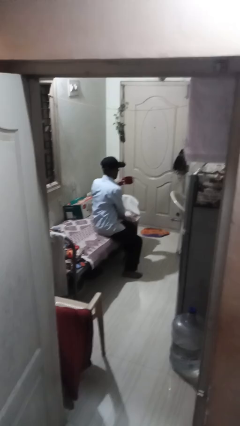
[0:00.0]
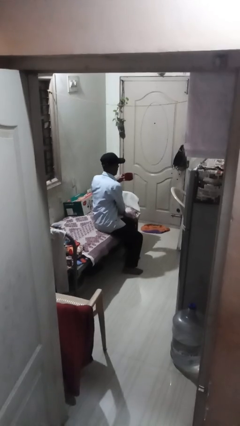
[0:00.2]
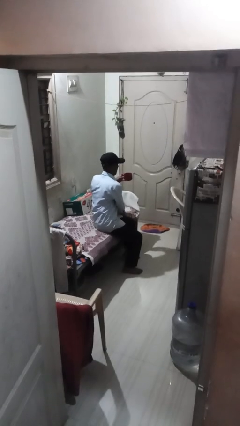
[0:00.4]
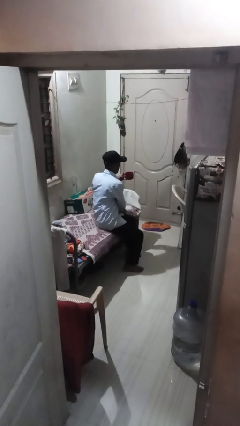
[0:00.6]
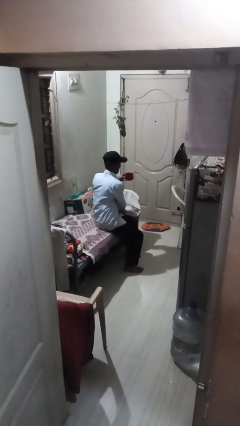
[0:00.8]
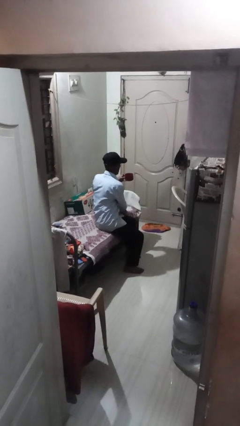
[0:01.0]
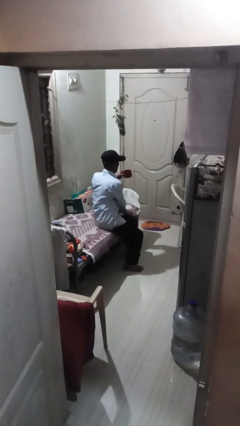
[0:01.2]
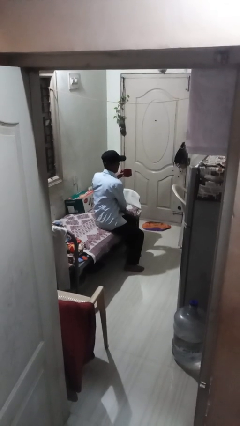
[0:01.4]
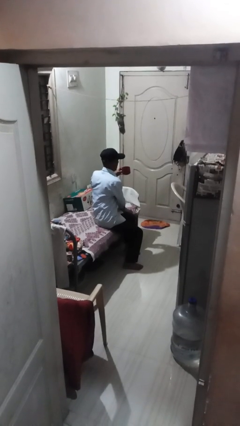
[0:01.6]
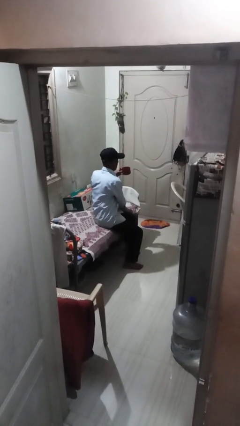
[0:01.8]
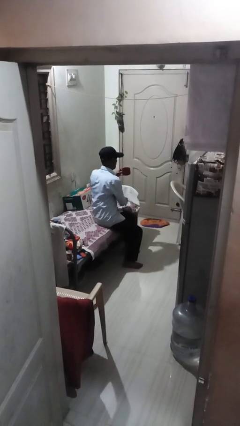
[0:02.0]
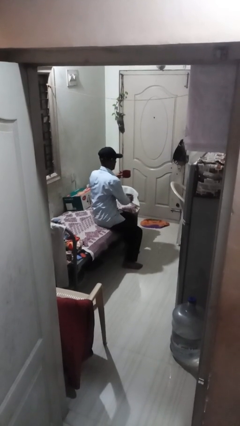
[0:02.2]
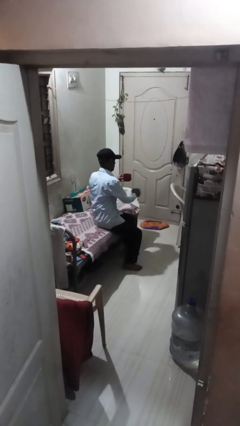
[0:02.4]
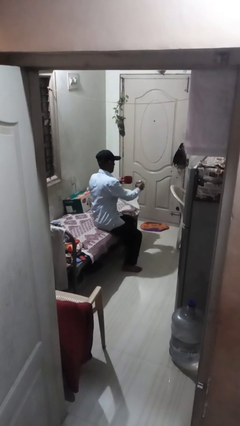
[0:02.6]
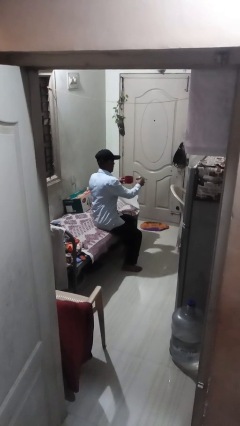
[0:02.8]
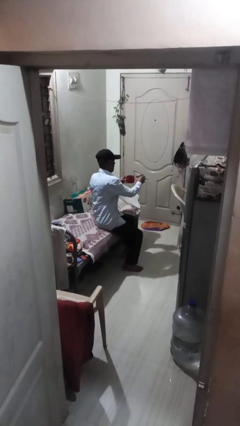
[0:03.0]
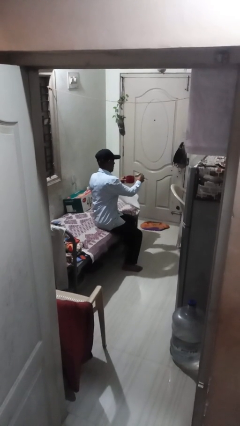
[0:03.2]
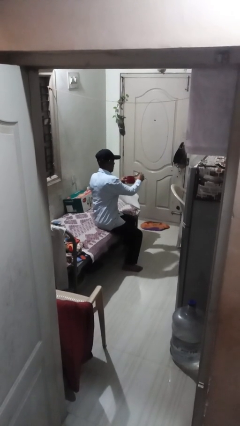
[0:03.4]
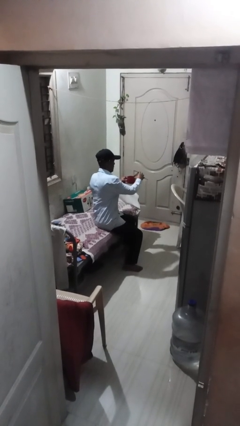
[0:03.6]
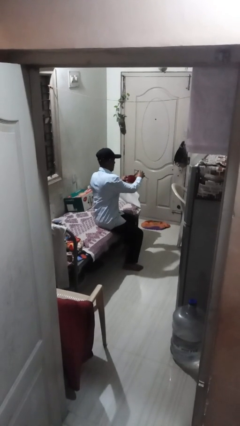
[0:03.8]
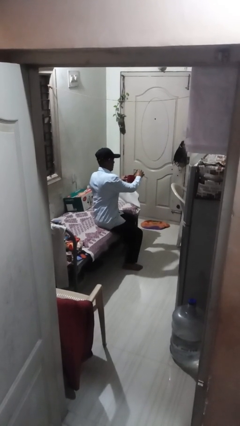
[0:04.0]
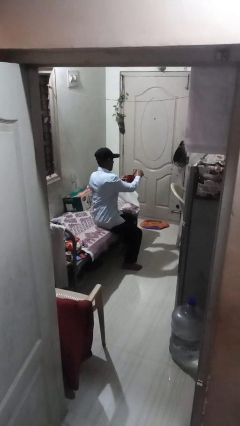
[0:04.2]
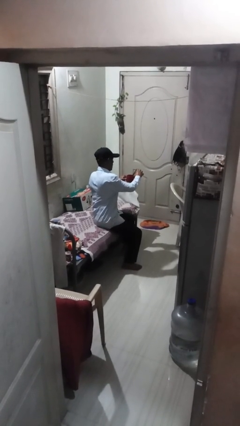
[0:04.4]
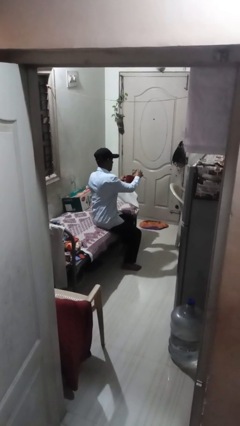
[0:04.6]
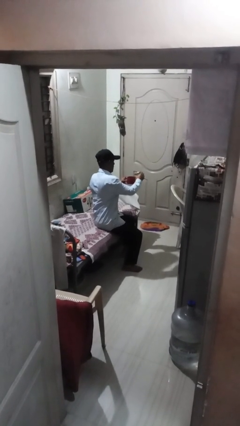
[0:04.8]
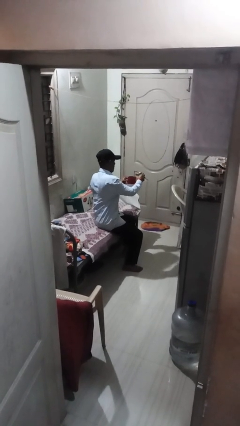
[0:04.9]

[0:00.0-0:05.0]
person pours coffee into mug

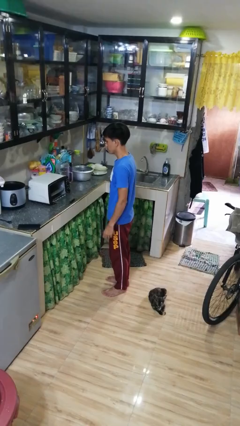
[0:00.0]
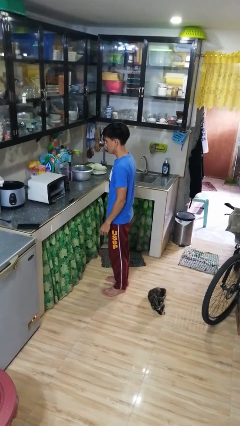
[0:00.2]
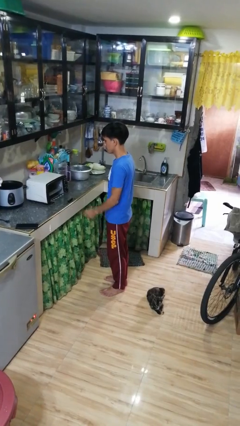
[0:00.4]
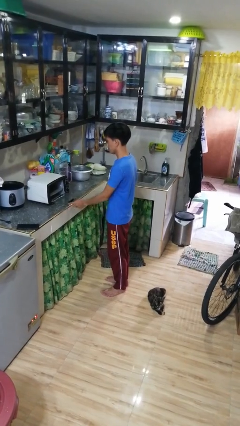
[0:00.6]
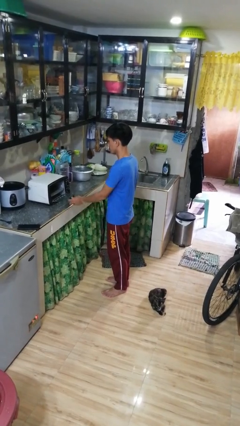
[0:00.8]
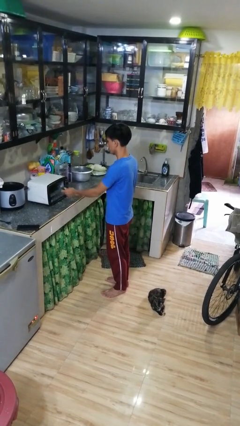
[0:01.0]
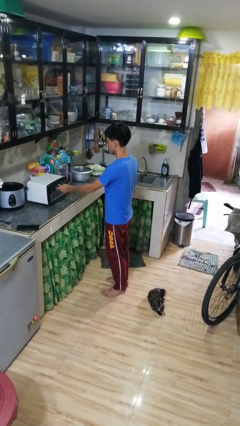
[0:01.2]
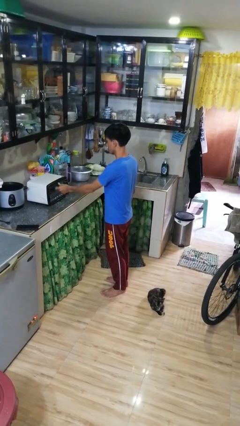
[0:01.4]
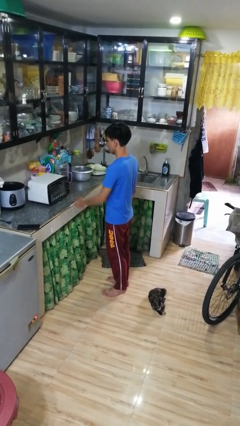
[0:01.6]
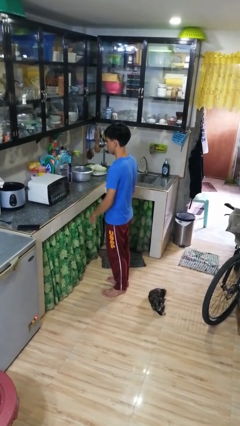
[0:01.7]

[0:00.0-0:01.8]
person closes microwave

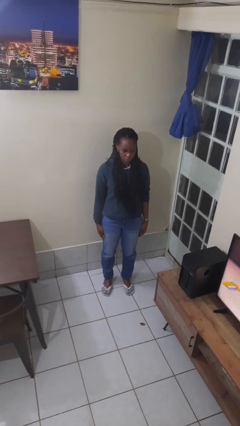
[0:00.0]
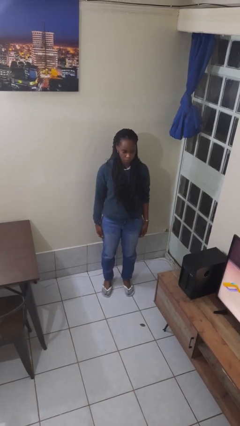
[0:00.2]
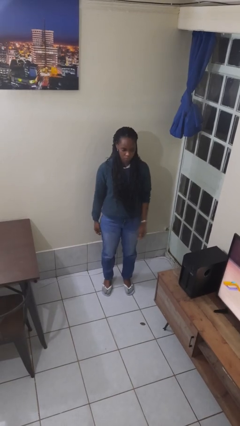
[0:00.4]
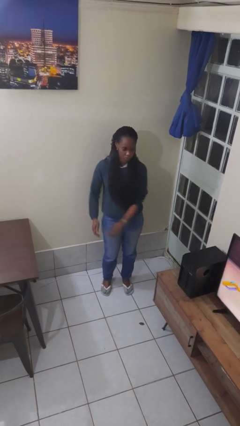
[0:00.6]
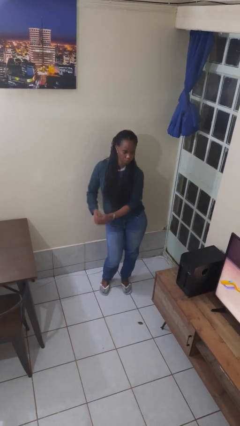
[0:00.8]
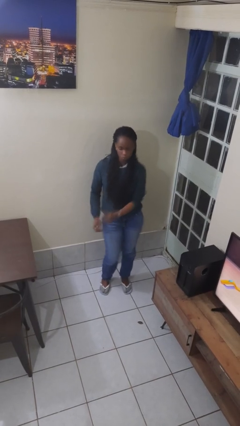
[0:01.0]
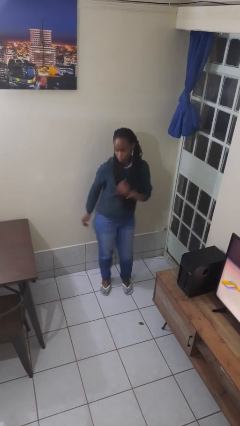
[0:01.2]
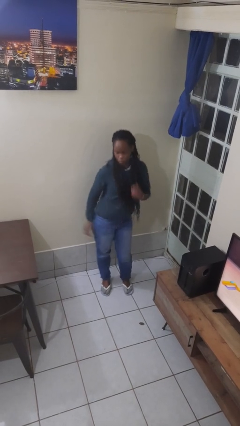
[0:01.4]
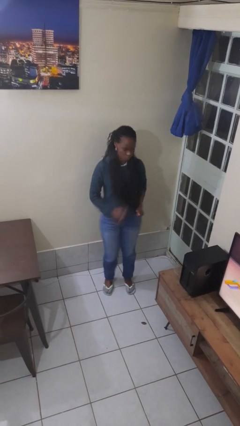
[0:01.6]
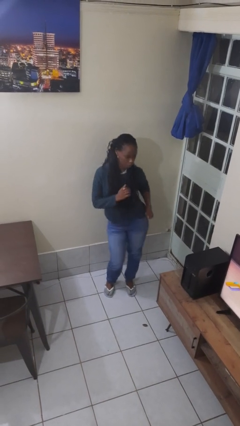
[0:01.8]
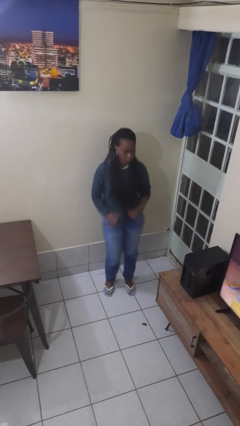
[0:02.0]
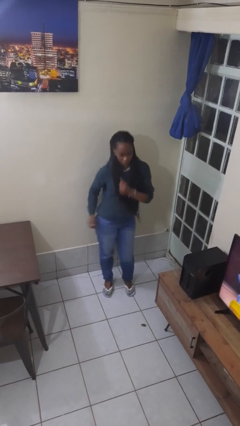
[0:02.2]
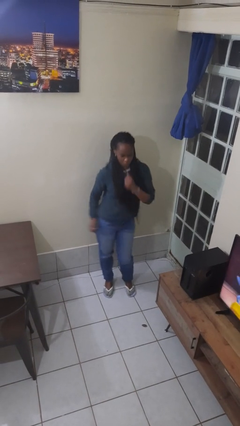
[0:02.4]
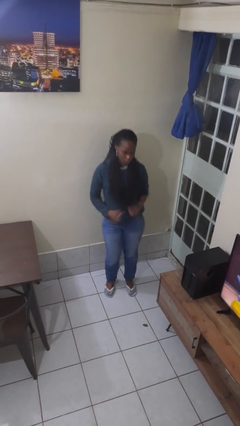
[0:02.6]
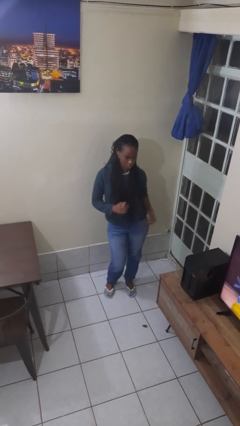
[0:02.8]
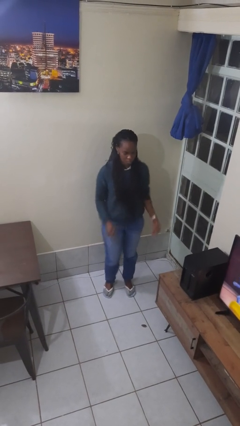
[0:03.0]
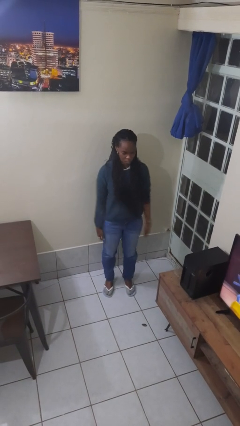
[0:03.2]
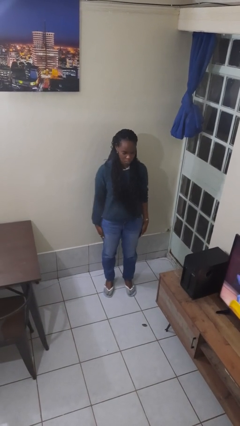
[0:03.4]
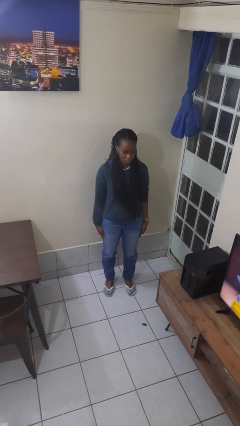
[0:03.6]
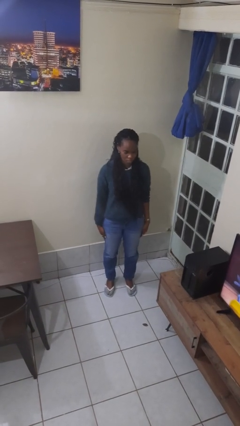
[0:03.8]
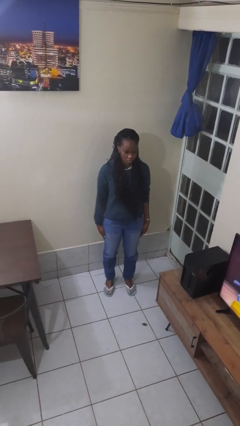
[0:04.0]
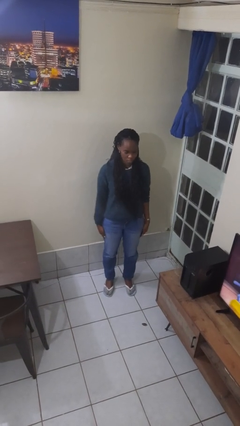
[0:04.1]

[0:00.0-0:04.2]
person wiggles hips

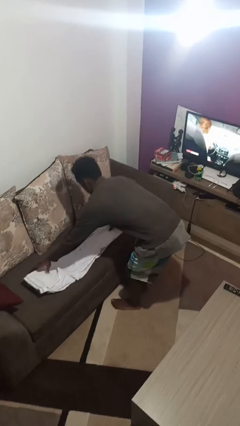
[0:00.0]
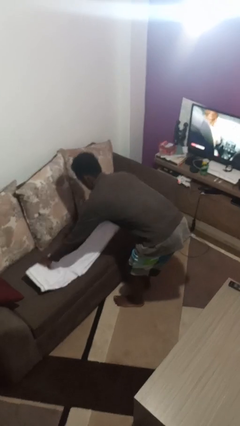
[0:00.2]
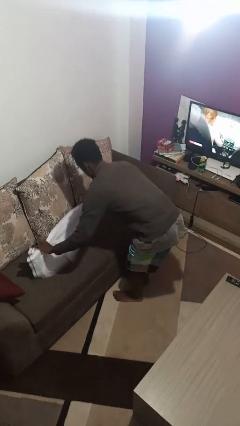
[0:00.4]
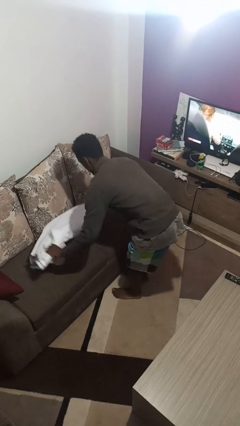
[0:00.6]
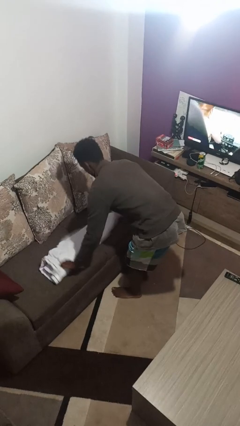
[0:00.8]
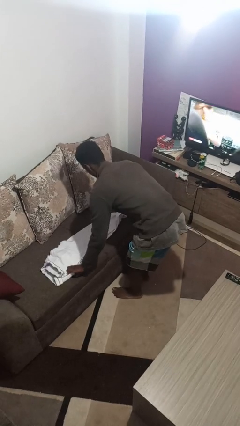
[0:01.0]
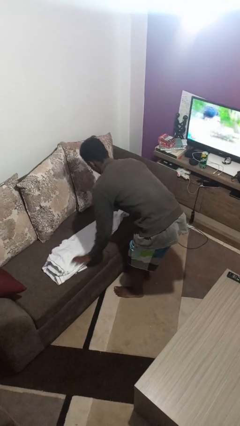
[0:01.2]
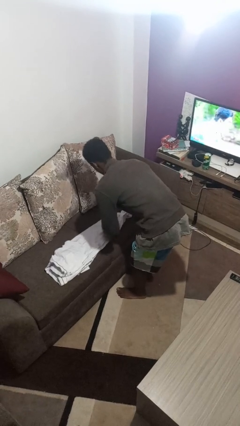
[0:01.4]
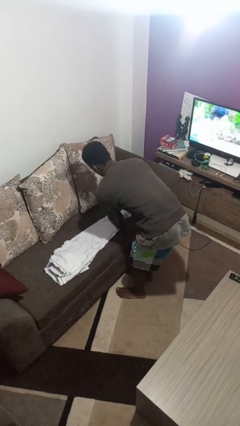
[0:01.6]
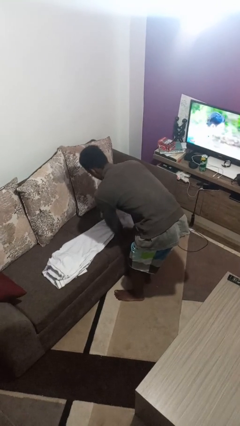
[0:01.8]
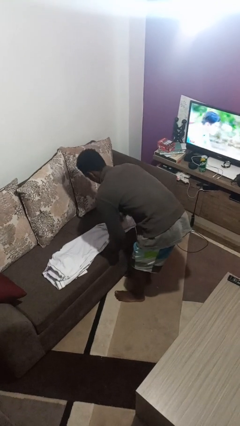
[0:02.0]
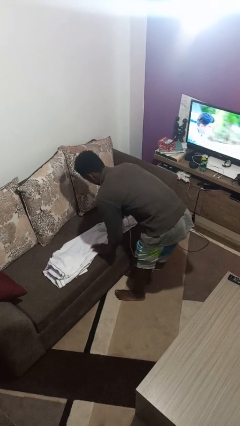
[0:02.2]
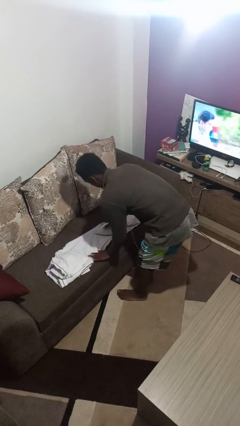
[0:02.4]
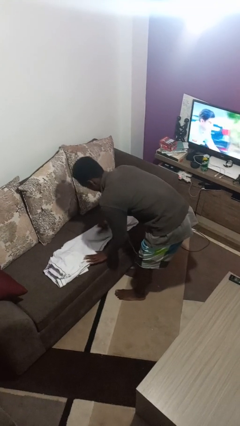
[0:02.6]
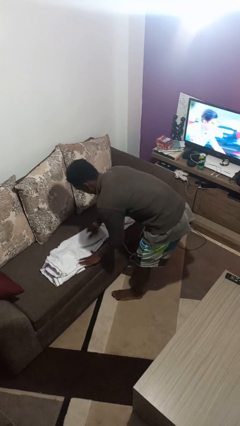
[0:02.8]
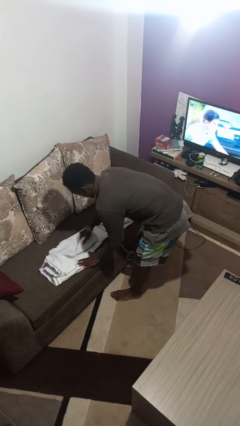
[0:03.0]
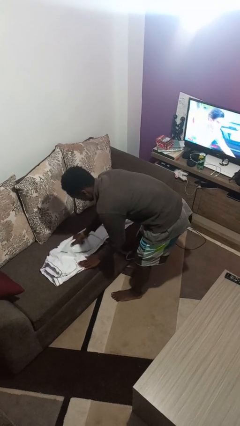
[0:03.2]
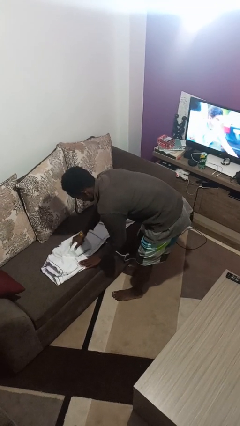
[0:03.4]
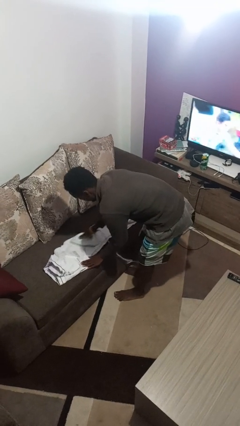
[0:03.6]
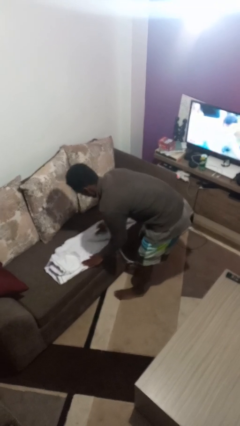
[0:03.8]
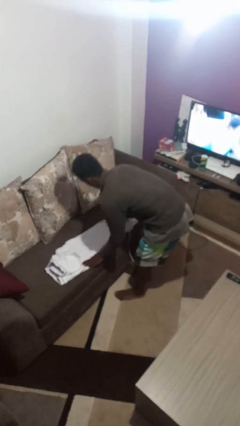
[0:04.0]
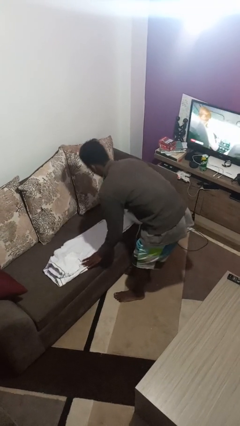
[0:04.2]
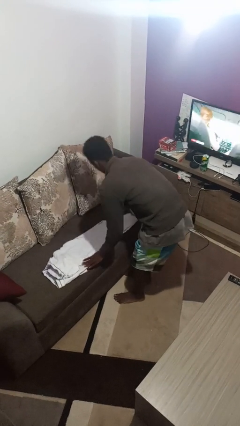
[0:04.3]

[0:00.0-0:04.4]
person irons clothes

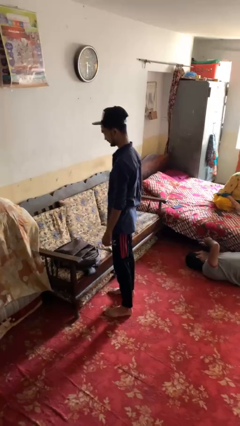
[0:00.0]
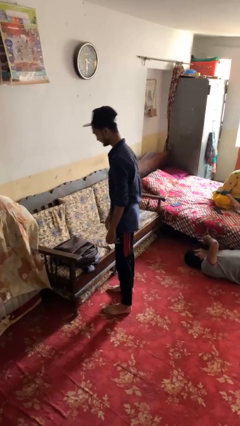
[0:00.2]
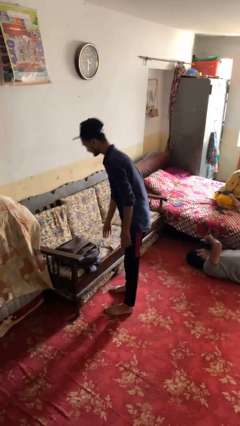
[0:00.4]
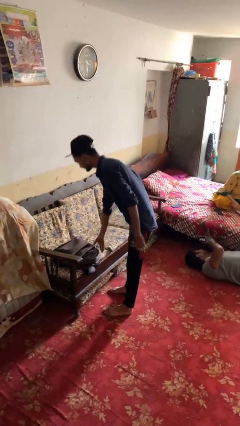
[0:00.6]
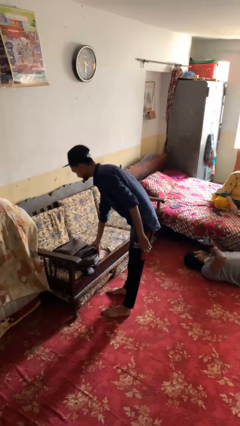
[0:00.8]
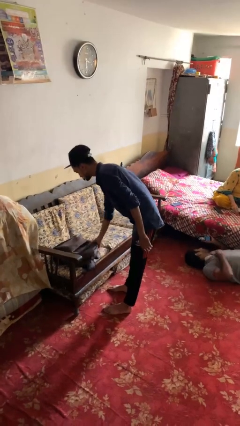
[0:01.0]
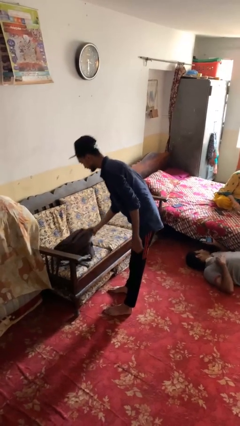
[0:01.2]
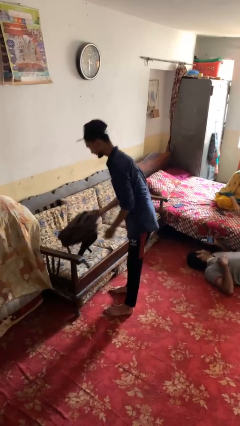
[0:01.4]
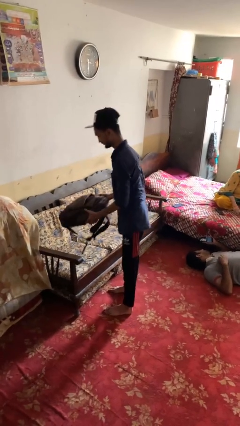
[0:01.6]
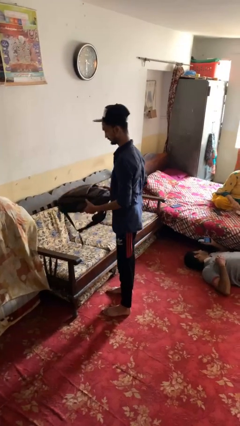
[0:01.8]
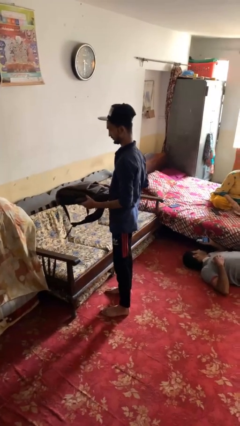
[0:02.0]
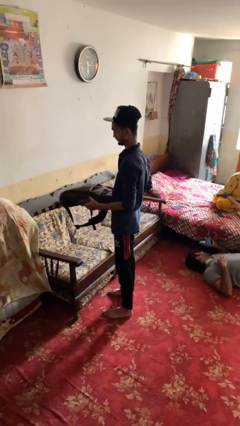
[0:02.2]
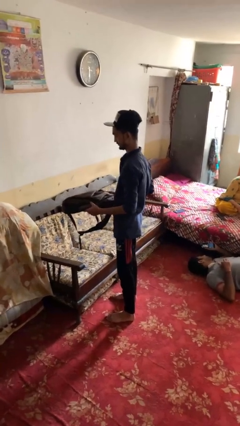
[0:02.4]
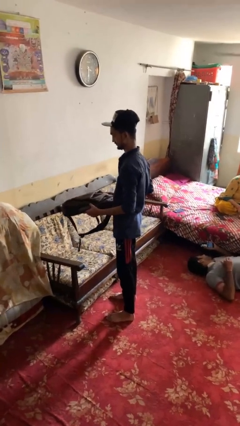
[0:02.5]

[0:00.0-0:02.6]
person picks up object from couch

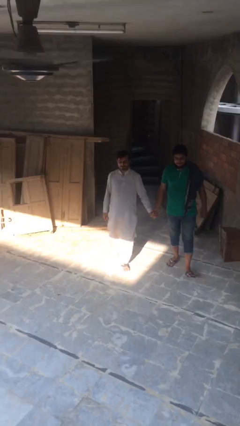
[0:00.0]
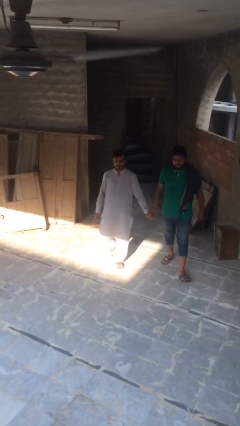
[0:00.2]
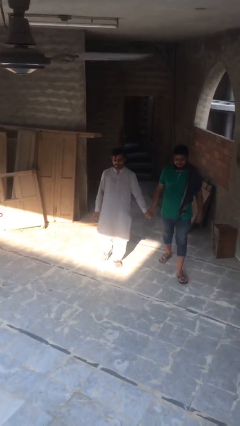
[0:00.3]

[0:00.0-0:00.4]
person holds hand
